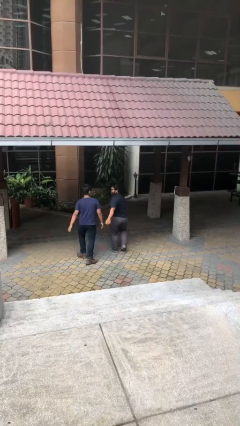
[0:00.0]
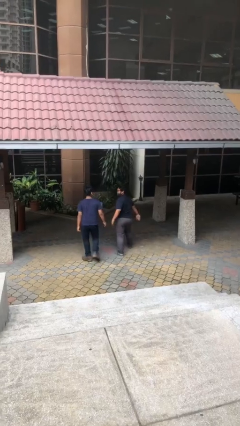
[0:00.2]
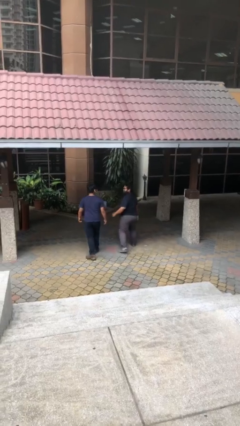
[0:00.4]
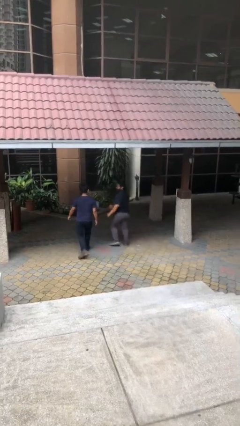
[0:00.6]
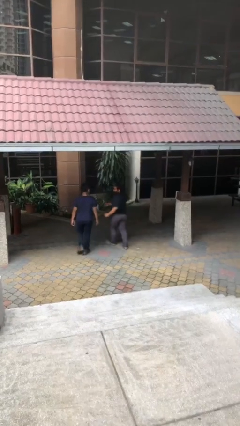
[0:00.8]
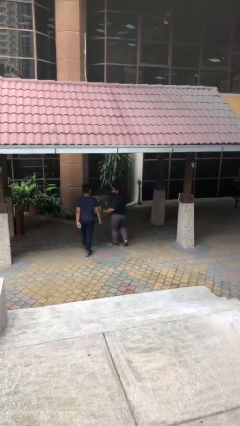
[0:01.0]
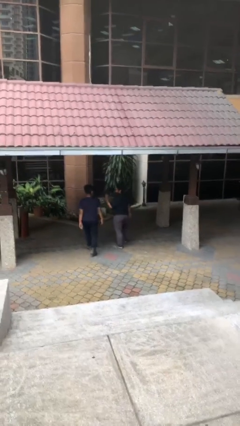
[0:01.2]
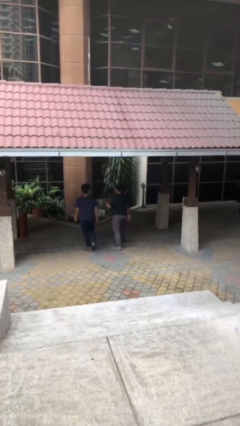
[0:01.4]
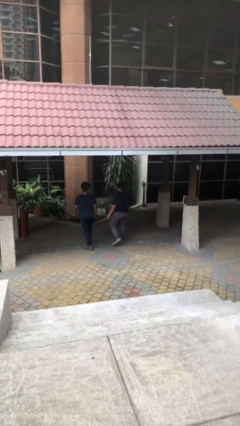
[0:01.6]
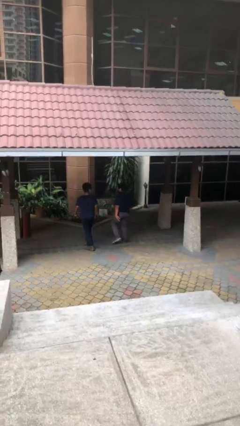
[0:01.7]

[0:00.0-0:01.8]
person talks to person

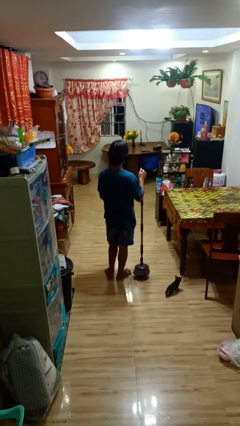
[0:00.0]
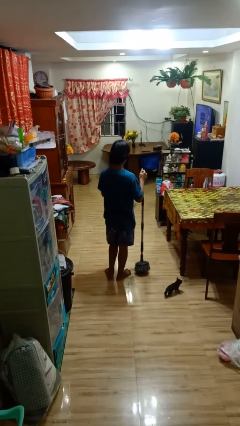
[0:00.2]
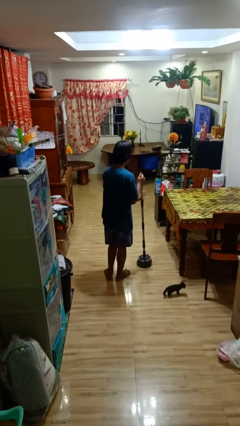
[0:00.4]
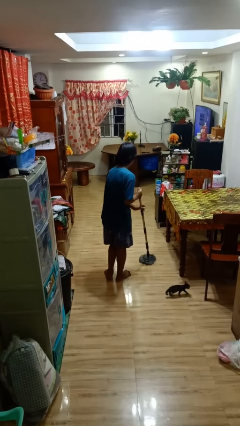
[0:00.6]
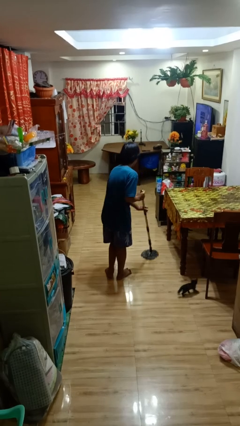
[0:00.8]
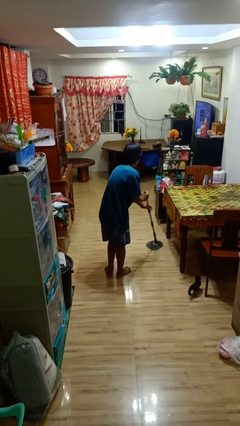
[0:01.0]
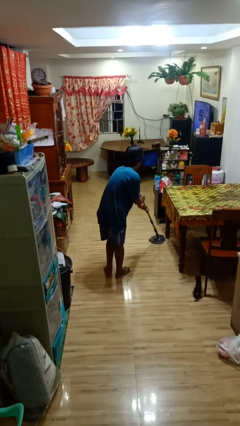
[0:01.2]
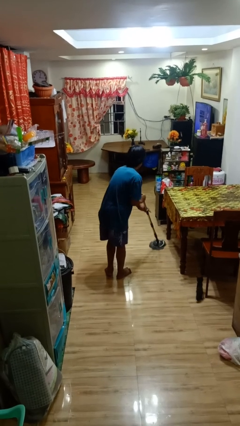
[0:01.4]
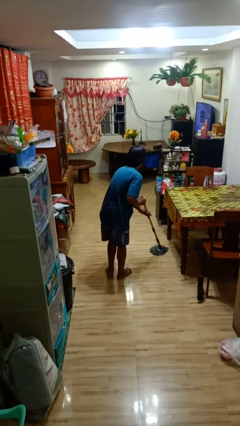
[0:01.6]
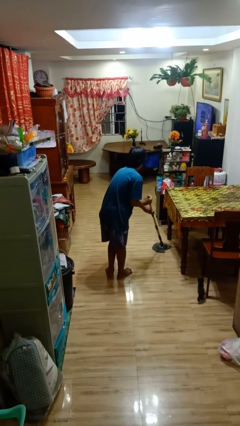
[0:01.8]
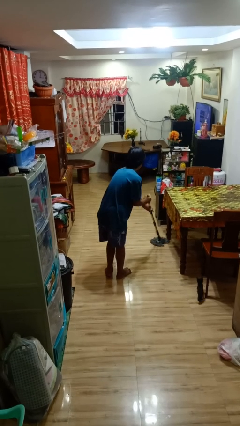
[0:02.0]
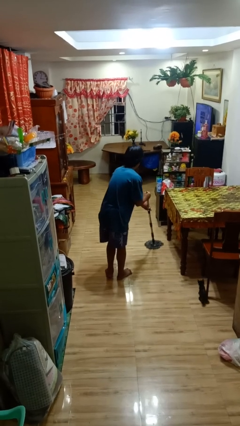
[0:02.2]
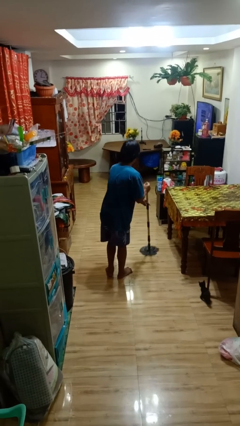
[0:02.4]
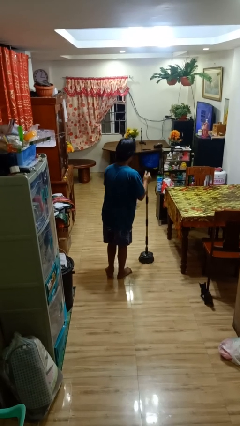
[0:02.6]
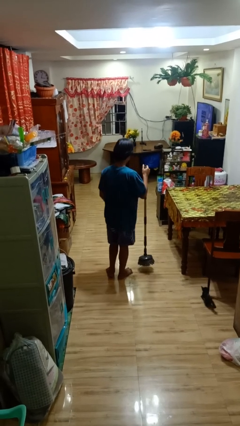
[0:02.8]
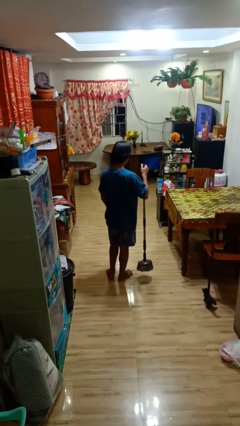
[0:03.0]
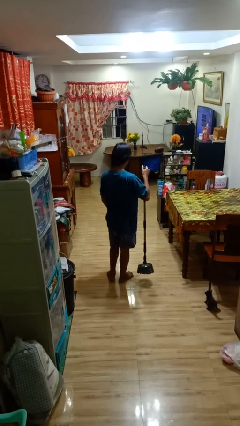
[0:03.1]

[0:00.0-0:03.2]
person mops

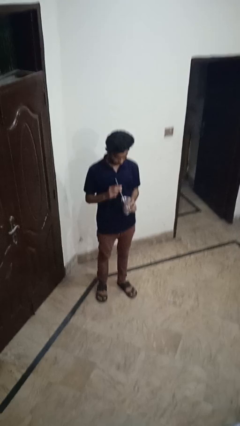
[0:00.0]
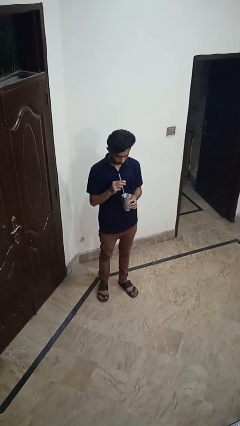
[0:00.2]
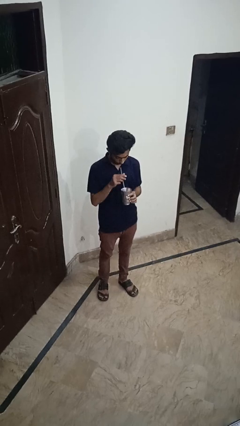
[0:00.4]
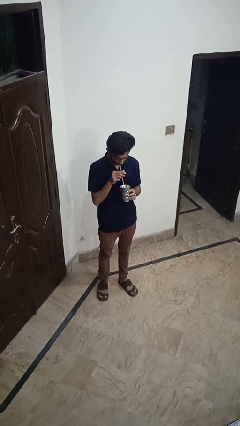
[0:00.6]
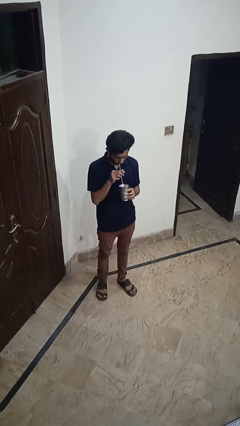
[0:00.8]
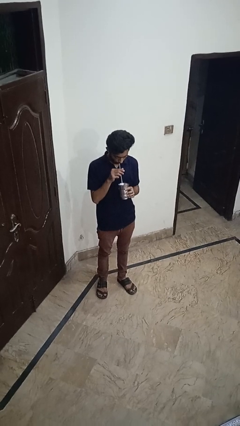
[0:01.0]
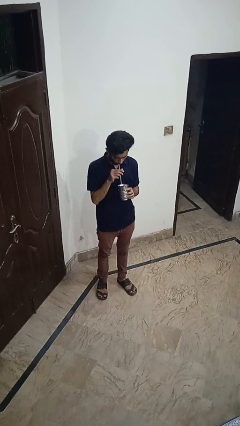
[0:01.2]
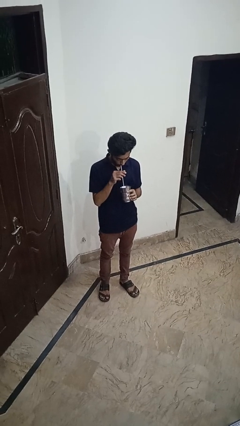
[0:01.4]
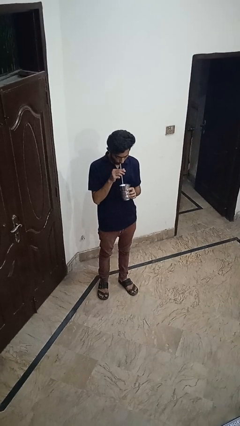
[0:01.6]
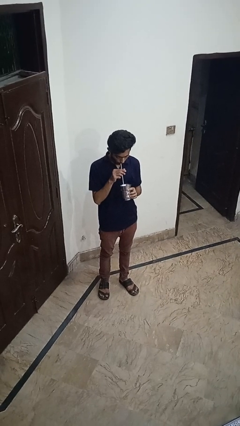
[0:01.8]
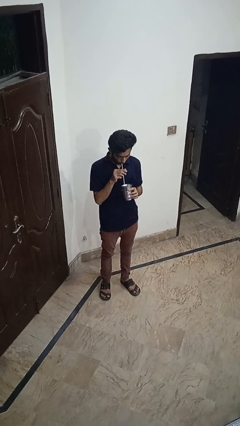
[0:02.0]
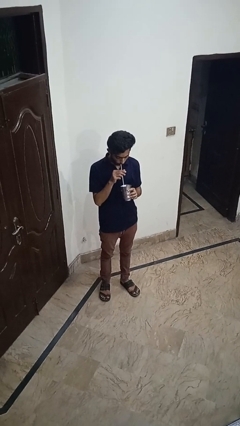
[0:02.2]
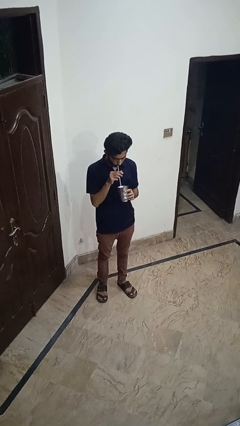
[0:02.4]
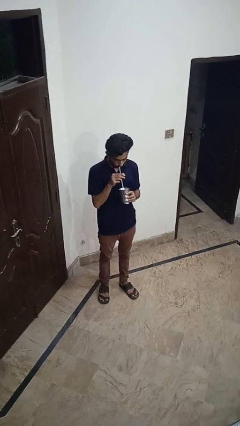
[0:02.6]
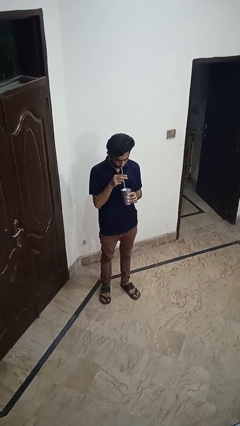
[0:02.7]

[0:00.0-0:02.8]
person drinks from straw

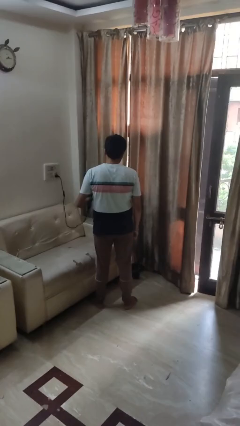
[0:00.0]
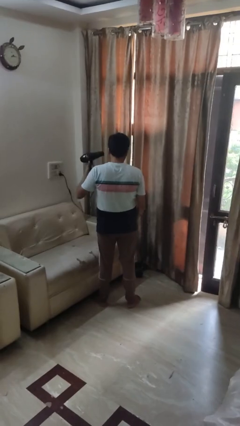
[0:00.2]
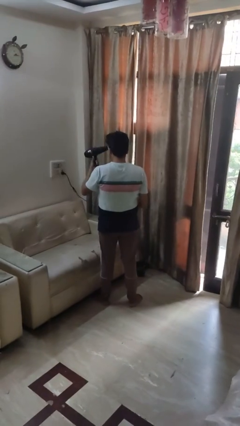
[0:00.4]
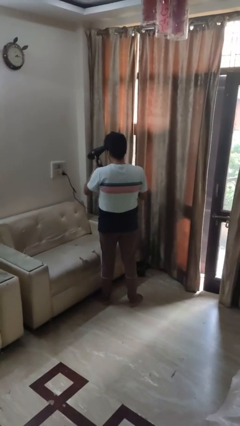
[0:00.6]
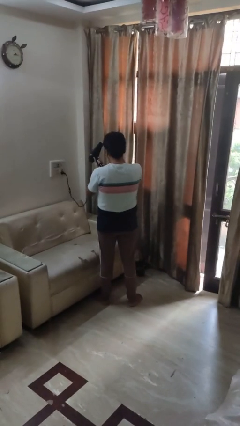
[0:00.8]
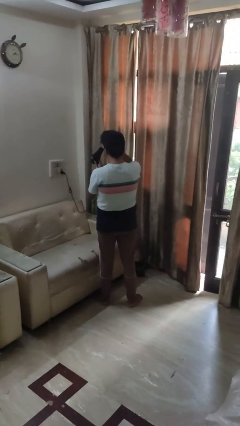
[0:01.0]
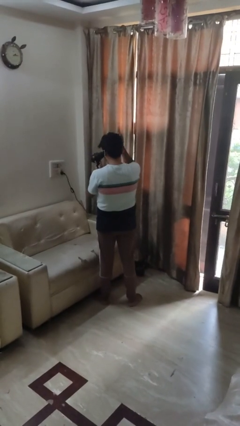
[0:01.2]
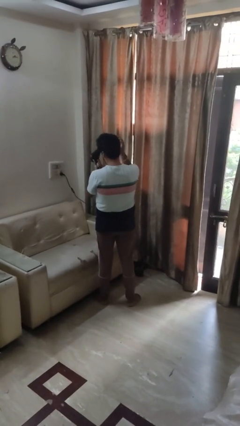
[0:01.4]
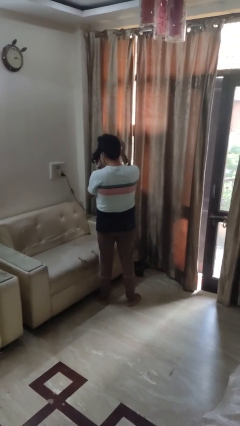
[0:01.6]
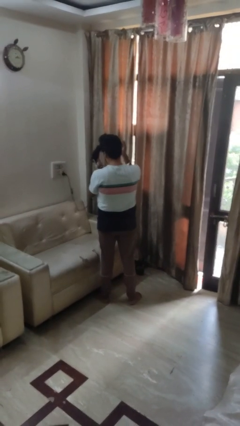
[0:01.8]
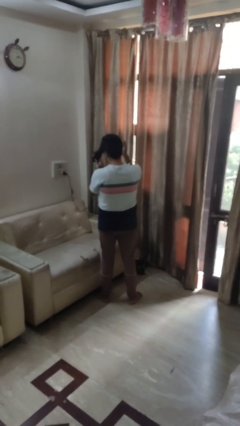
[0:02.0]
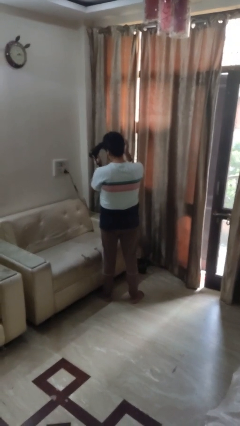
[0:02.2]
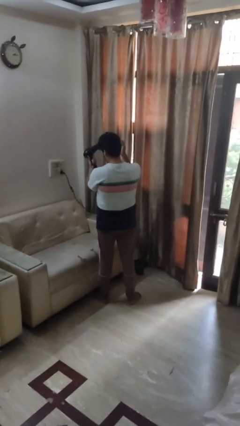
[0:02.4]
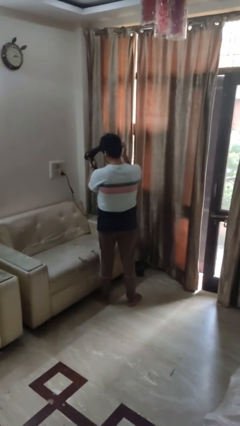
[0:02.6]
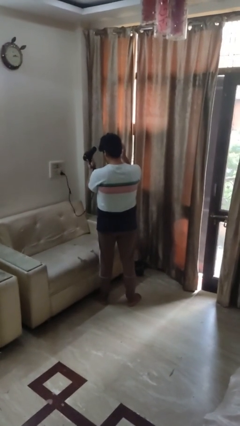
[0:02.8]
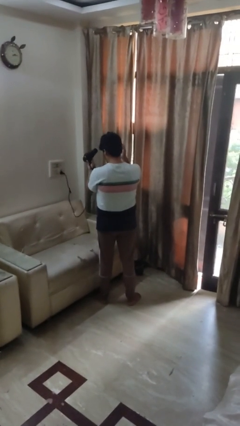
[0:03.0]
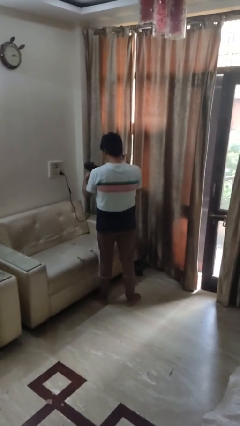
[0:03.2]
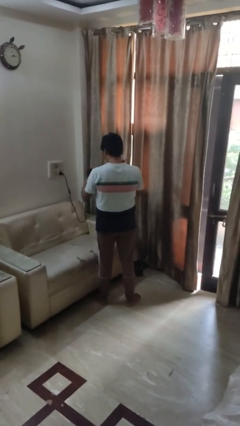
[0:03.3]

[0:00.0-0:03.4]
person dries hair with hairdryer

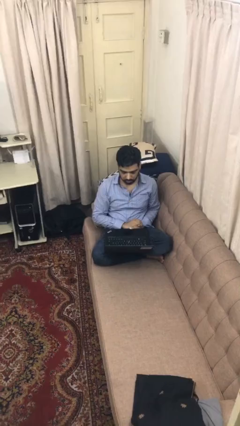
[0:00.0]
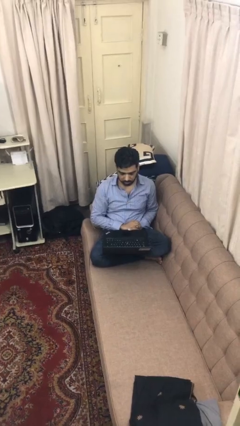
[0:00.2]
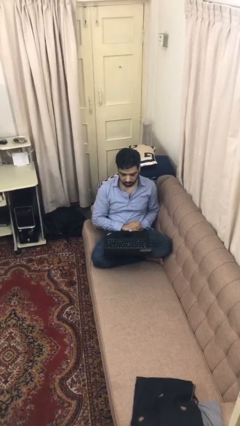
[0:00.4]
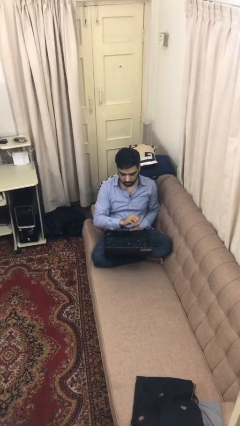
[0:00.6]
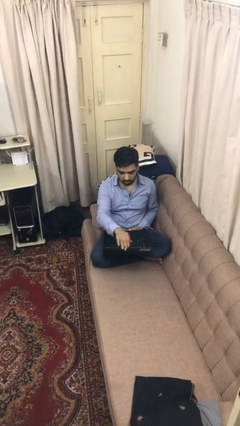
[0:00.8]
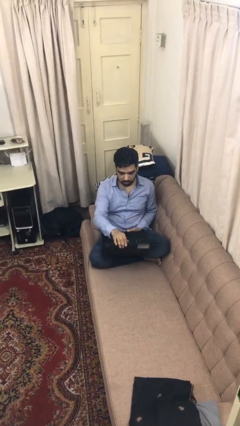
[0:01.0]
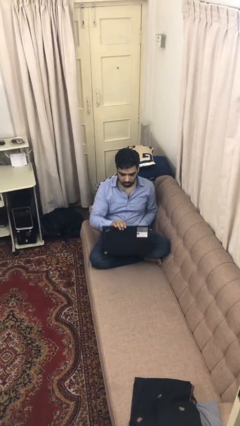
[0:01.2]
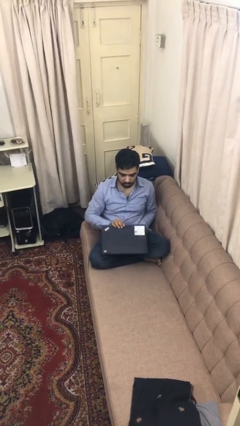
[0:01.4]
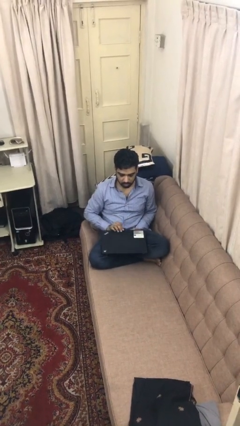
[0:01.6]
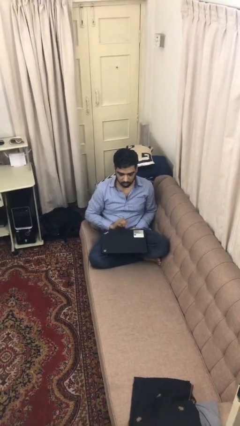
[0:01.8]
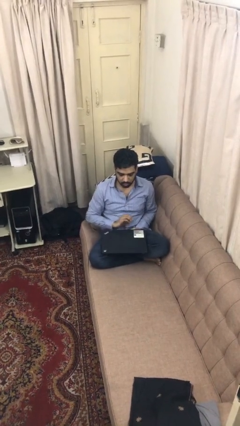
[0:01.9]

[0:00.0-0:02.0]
person closes laptop

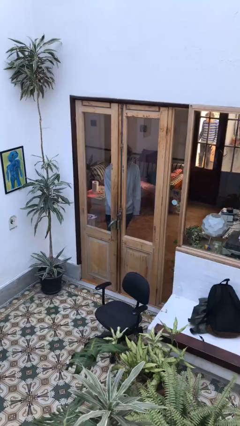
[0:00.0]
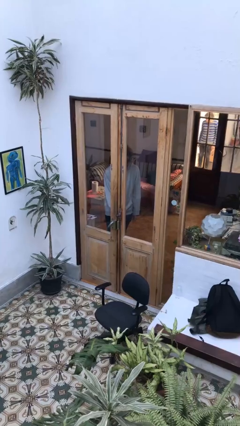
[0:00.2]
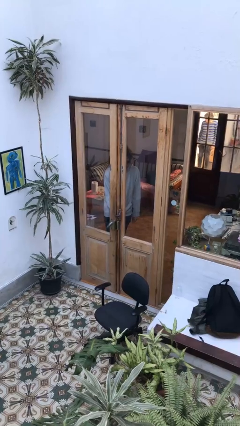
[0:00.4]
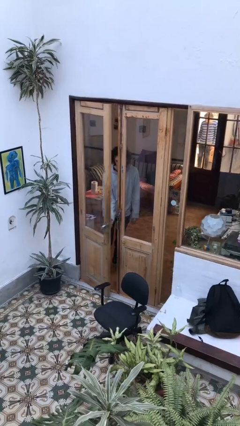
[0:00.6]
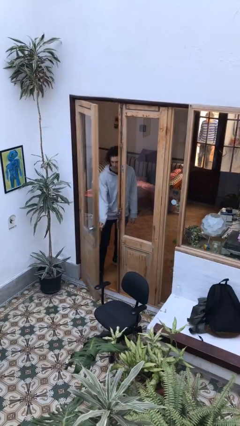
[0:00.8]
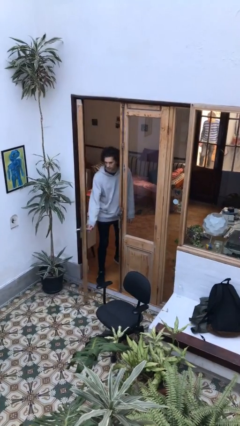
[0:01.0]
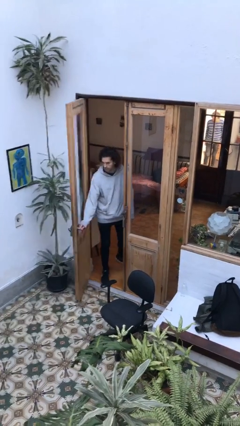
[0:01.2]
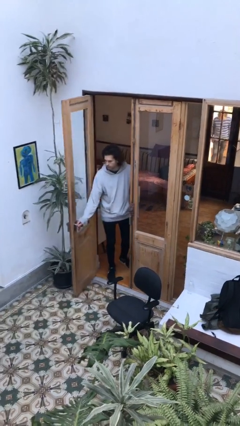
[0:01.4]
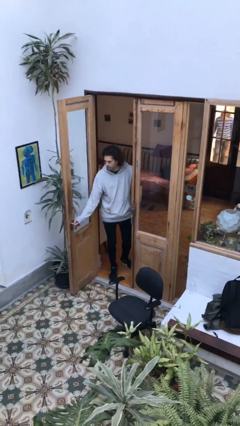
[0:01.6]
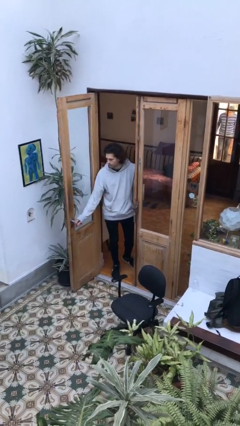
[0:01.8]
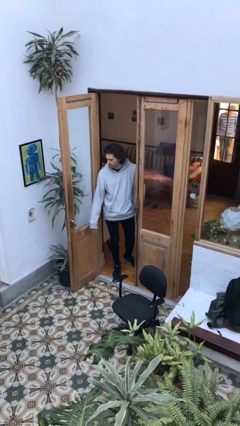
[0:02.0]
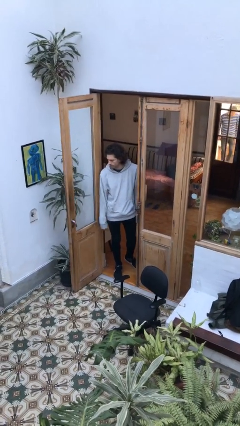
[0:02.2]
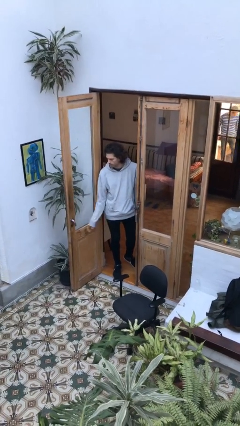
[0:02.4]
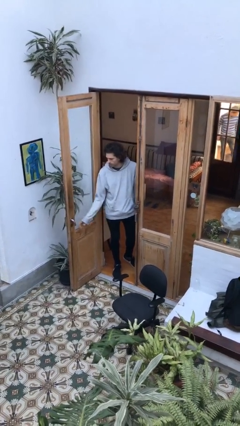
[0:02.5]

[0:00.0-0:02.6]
person opens facility door

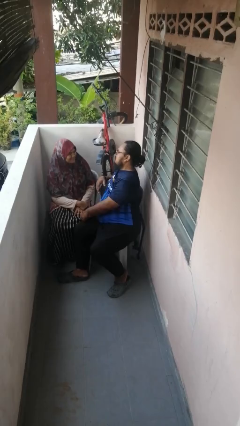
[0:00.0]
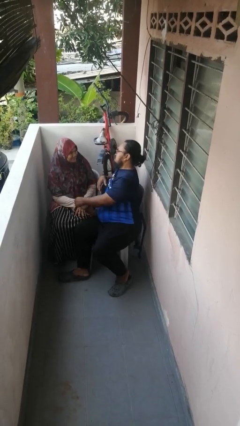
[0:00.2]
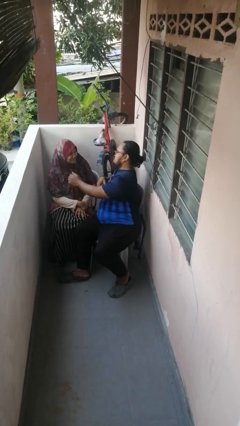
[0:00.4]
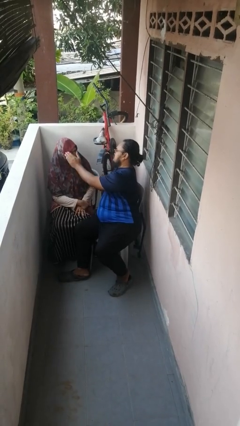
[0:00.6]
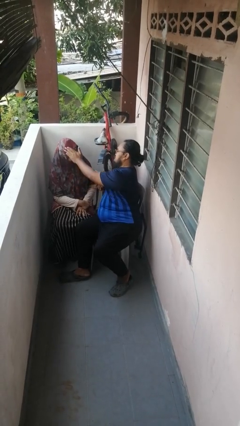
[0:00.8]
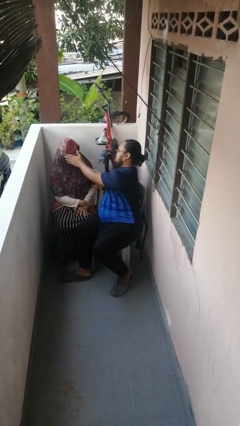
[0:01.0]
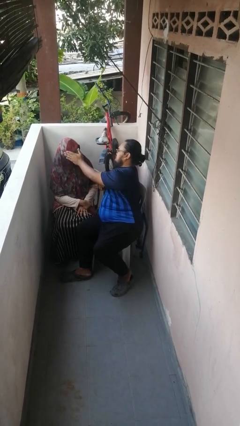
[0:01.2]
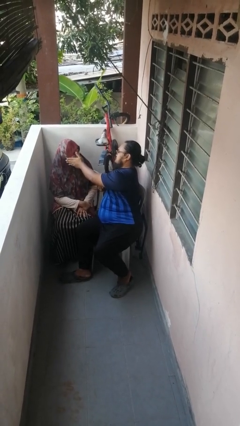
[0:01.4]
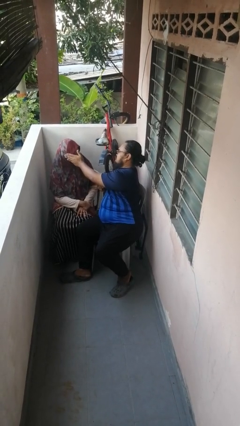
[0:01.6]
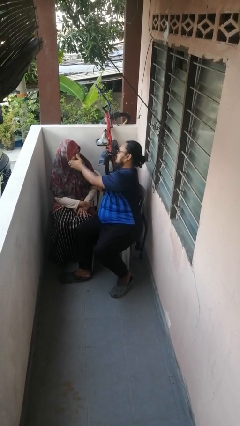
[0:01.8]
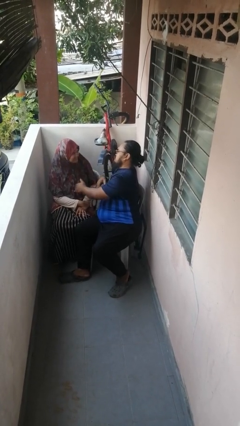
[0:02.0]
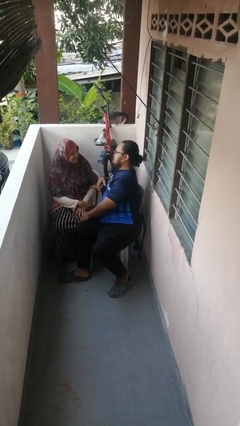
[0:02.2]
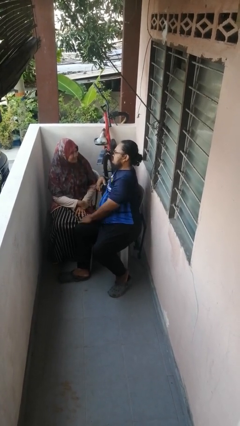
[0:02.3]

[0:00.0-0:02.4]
person touches face of person
